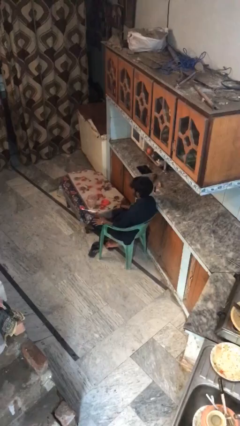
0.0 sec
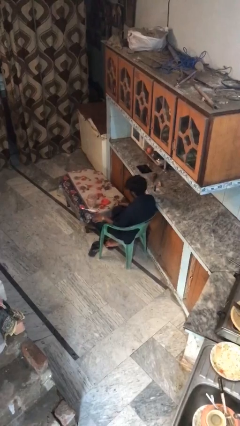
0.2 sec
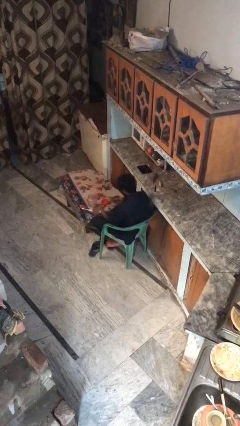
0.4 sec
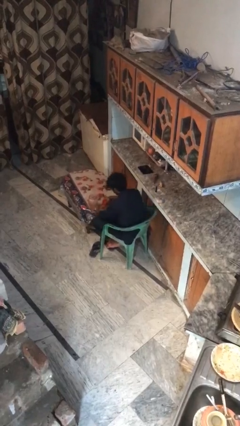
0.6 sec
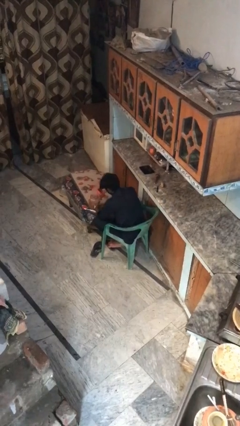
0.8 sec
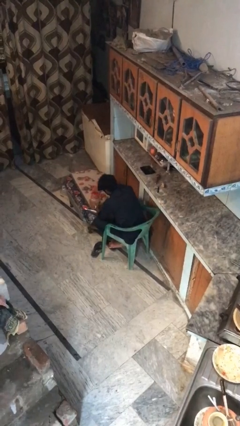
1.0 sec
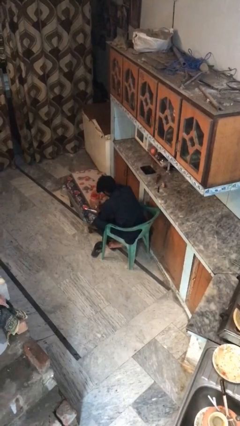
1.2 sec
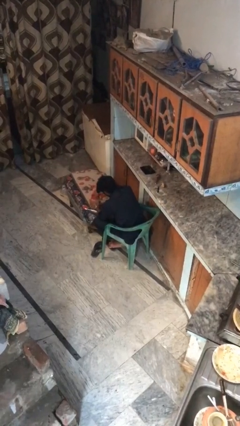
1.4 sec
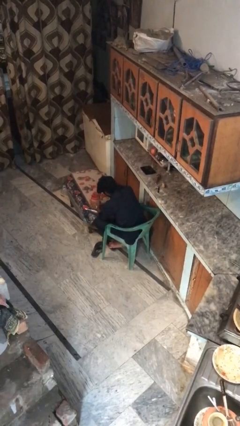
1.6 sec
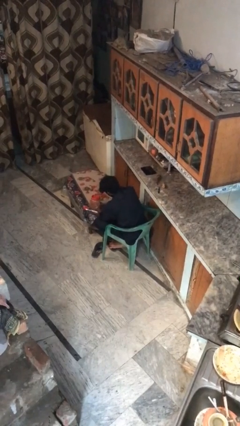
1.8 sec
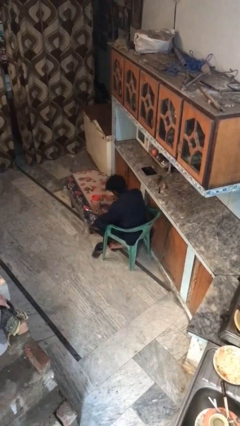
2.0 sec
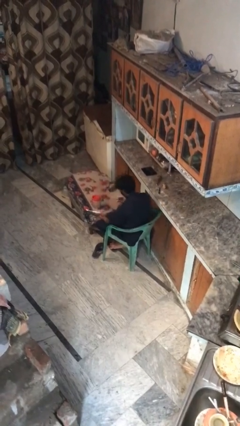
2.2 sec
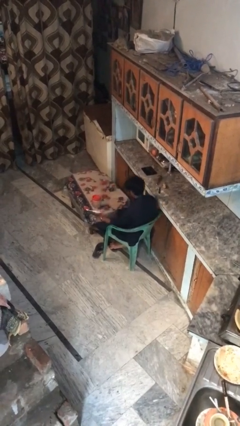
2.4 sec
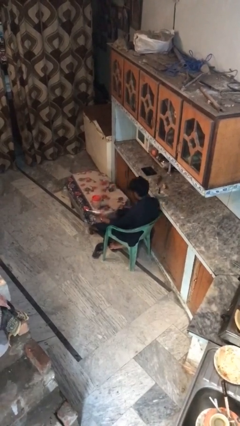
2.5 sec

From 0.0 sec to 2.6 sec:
person closes jar

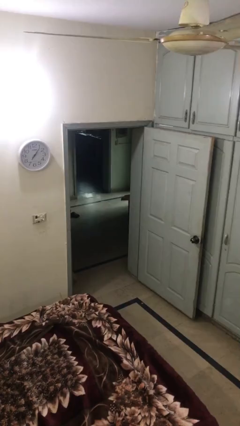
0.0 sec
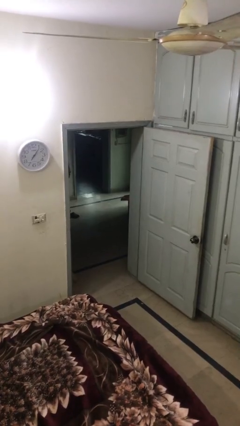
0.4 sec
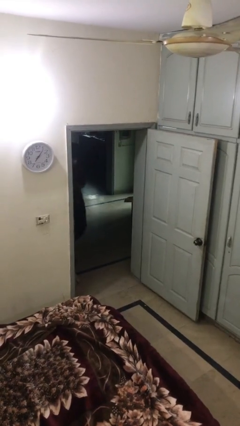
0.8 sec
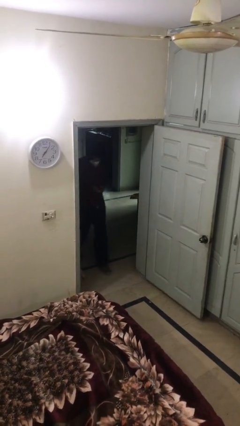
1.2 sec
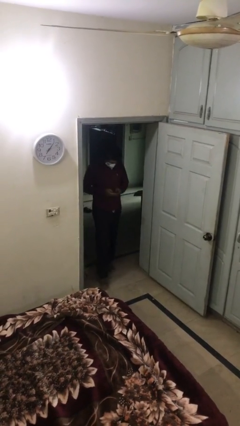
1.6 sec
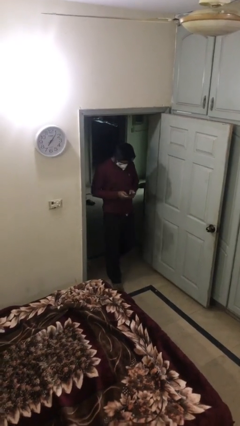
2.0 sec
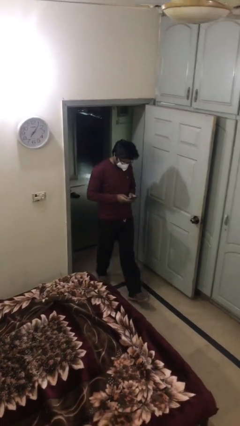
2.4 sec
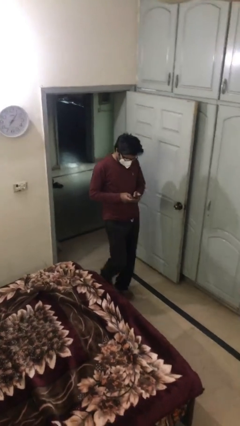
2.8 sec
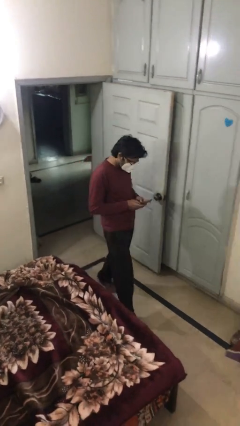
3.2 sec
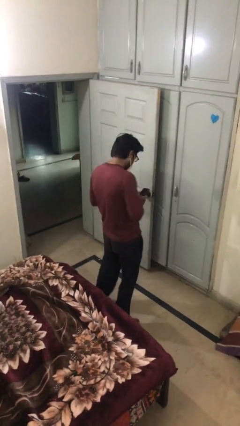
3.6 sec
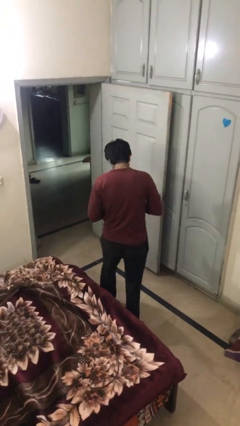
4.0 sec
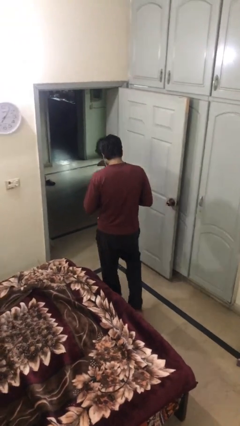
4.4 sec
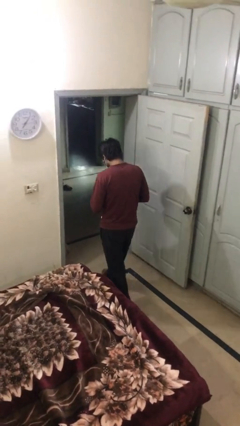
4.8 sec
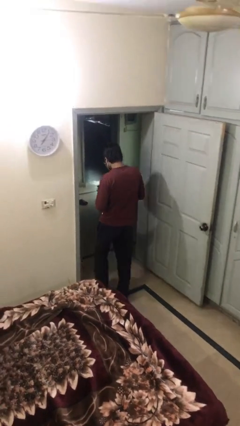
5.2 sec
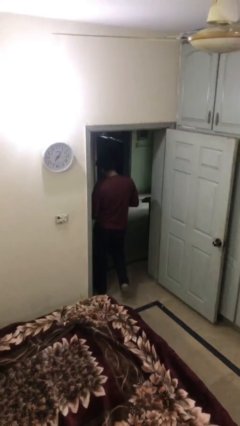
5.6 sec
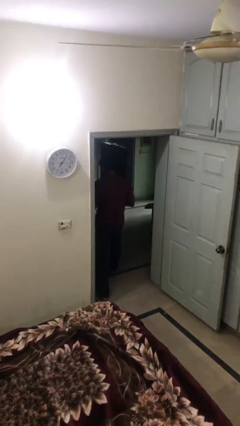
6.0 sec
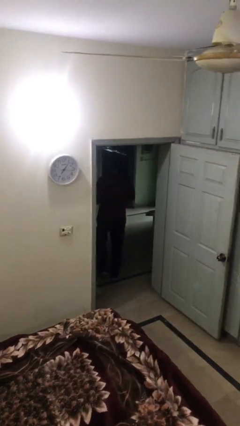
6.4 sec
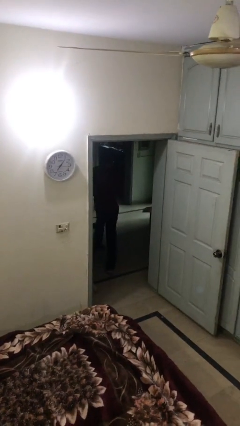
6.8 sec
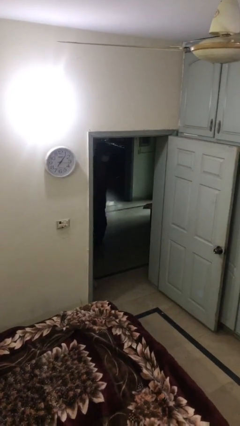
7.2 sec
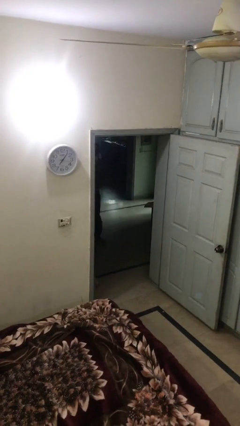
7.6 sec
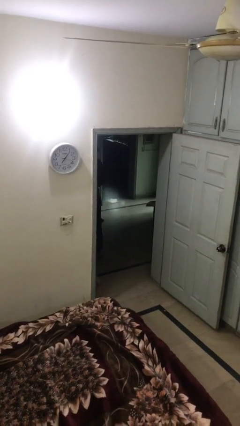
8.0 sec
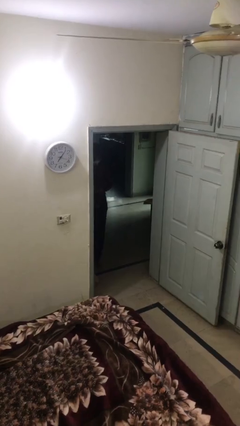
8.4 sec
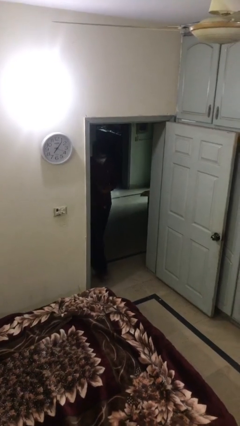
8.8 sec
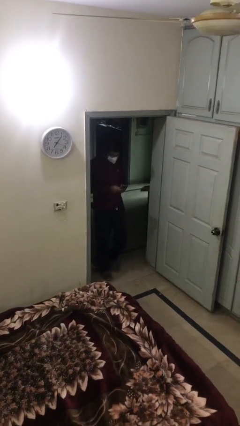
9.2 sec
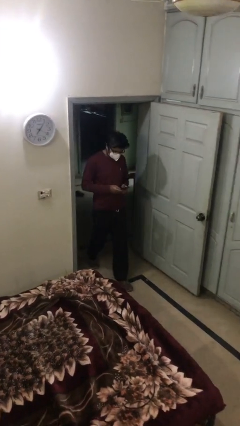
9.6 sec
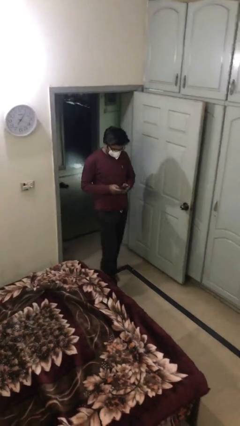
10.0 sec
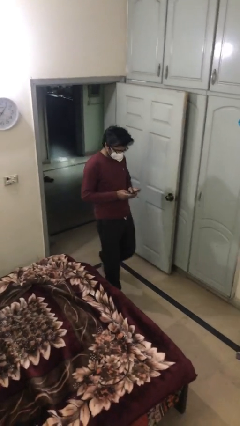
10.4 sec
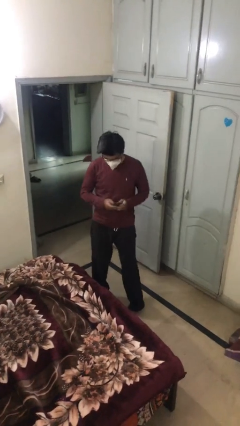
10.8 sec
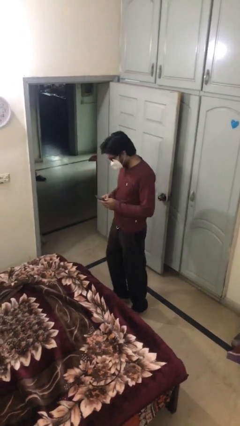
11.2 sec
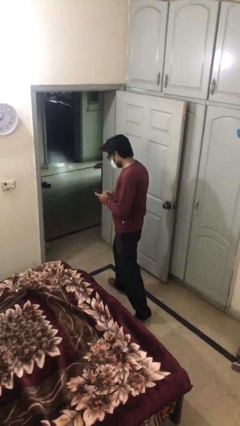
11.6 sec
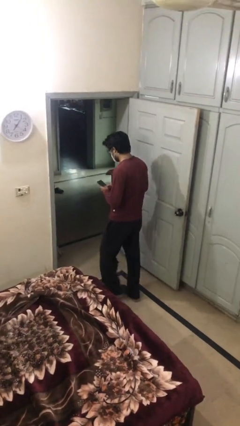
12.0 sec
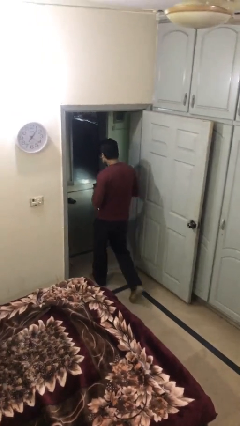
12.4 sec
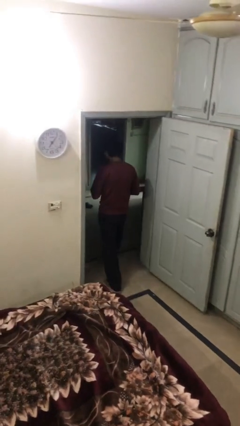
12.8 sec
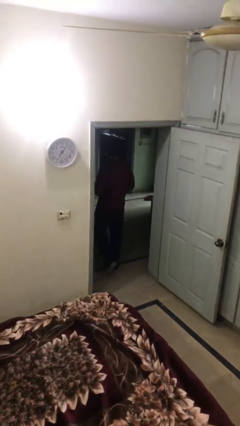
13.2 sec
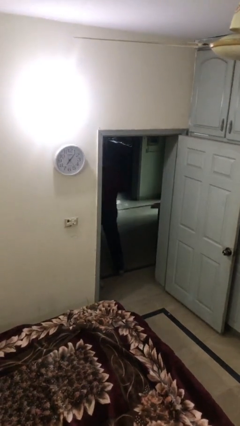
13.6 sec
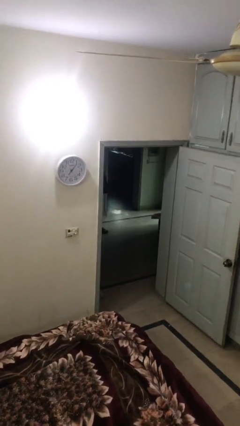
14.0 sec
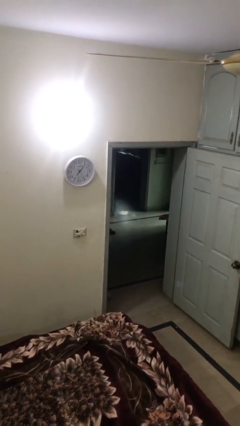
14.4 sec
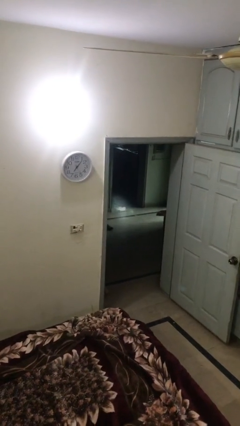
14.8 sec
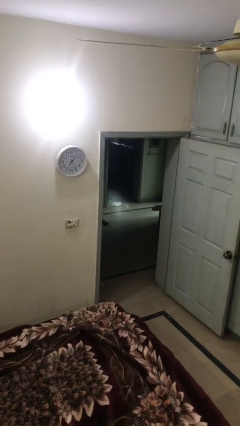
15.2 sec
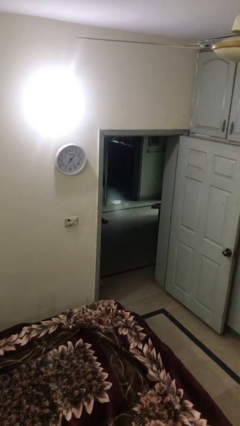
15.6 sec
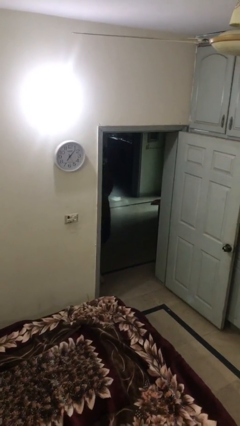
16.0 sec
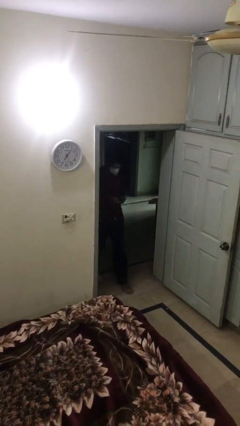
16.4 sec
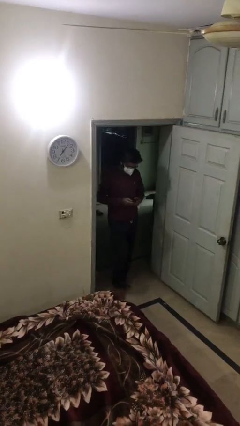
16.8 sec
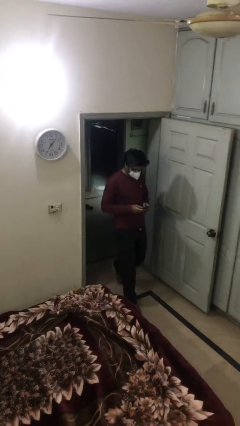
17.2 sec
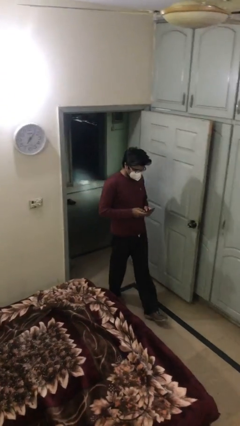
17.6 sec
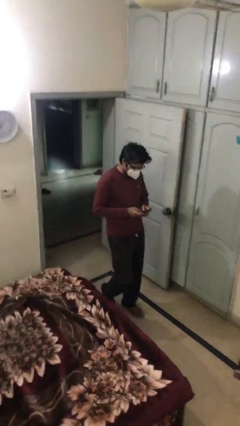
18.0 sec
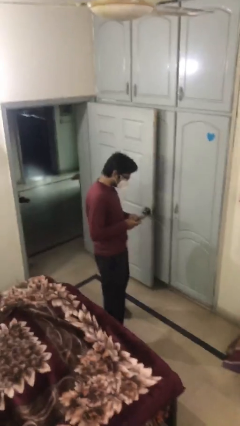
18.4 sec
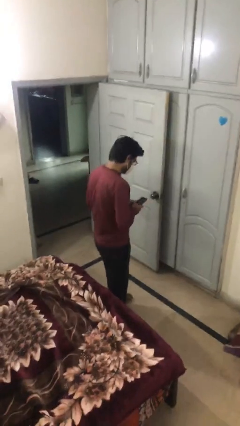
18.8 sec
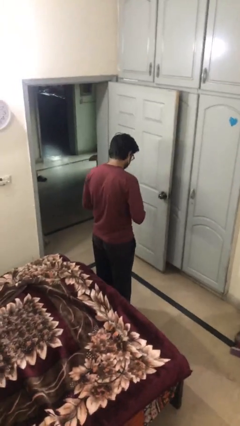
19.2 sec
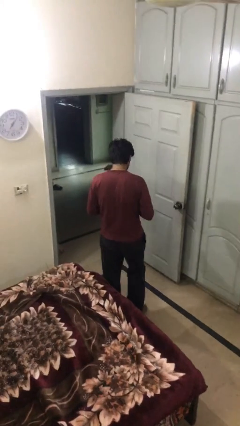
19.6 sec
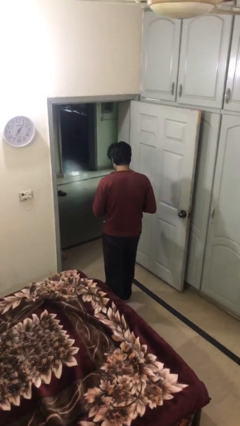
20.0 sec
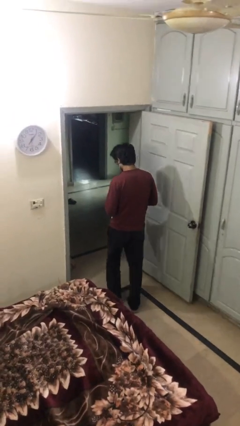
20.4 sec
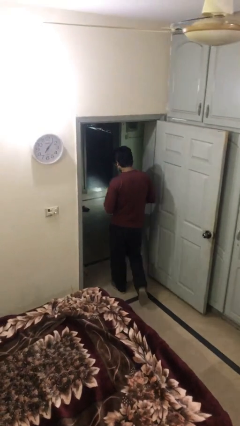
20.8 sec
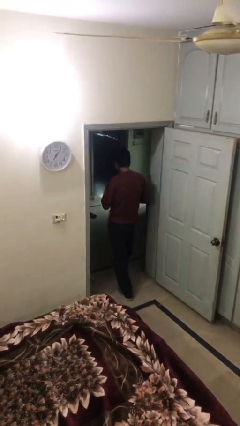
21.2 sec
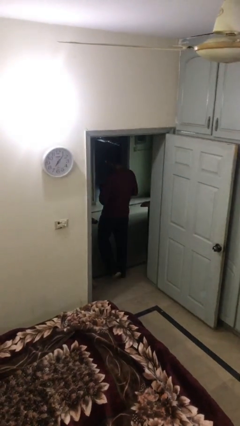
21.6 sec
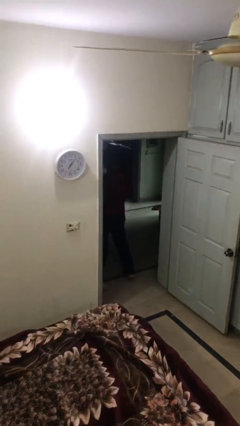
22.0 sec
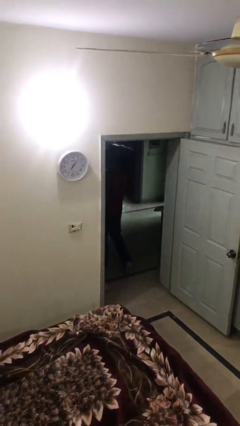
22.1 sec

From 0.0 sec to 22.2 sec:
person texts on phone

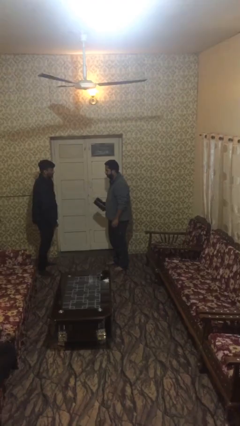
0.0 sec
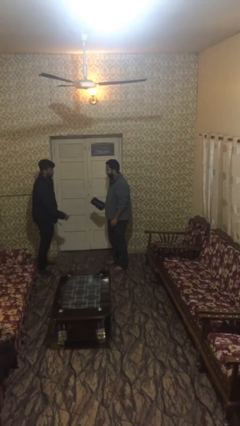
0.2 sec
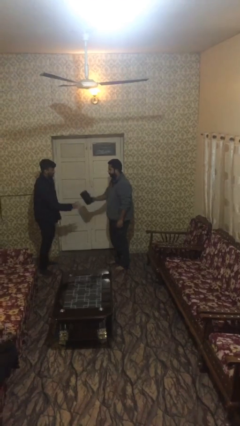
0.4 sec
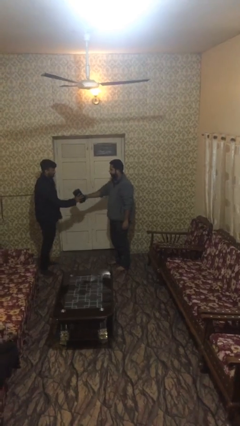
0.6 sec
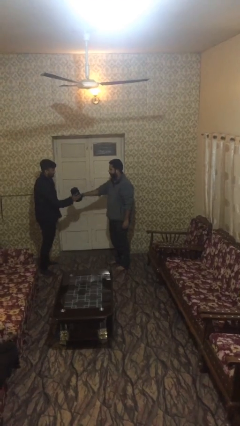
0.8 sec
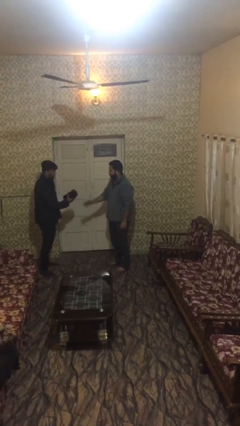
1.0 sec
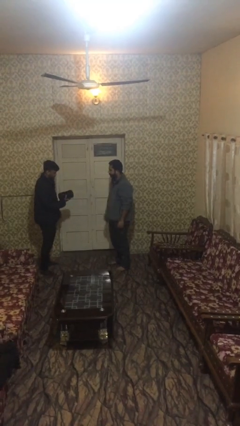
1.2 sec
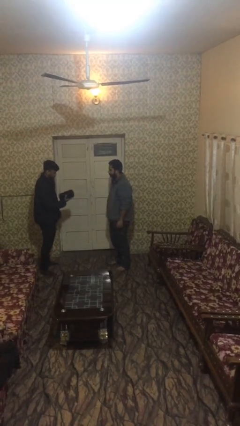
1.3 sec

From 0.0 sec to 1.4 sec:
person transfers object to person

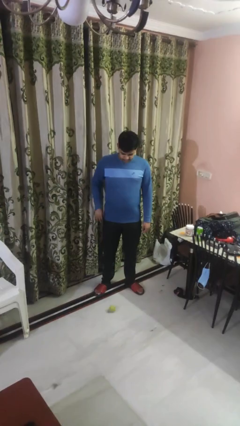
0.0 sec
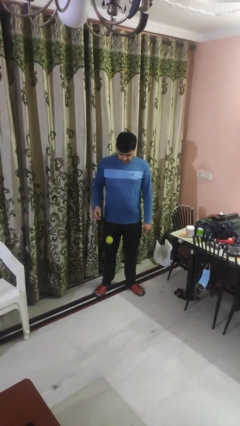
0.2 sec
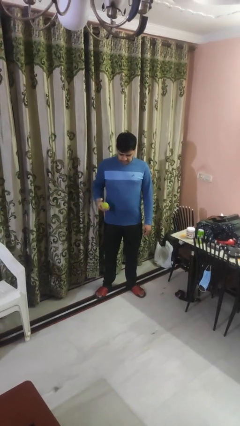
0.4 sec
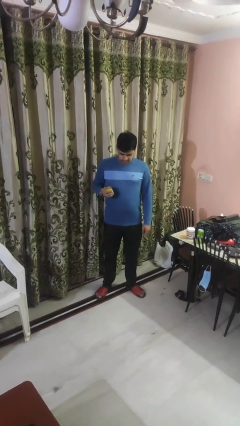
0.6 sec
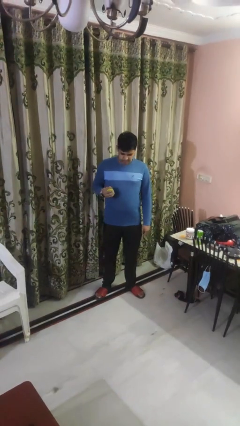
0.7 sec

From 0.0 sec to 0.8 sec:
person bounces ball on floor

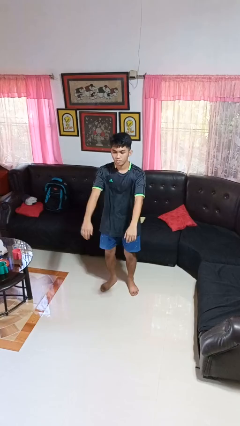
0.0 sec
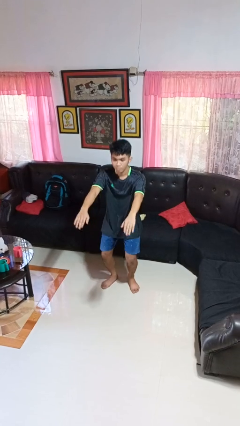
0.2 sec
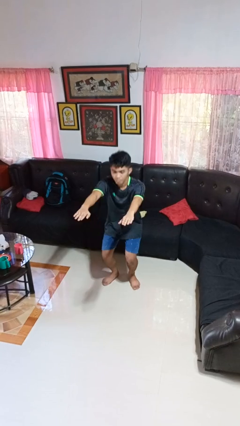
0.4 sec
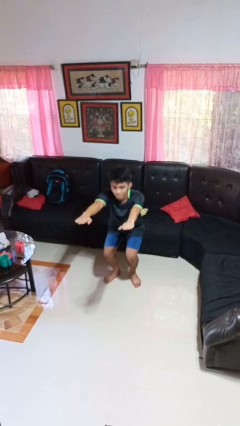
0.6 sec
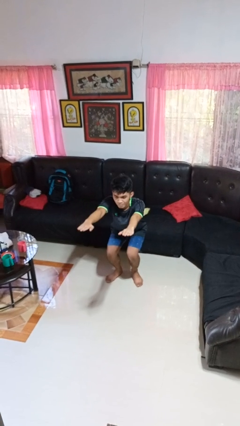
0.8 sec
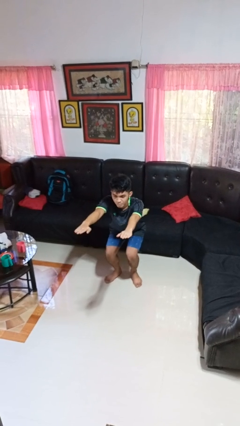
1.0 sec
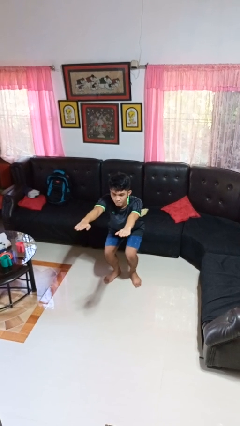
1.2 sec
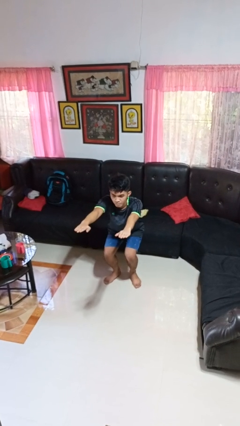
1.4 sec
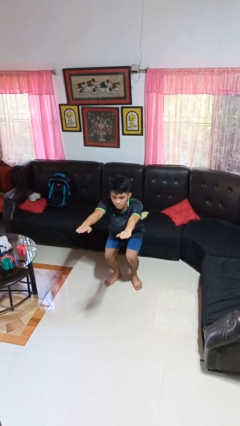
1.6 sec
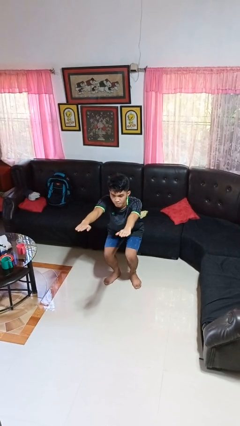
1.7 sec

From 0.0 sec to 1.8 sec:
person squats
